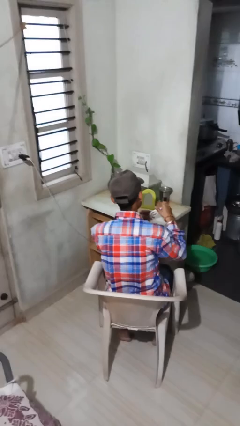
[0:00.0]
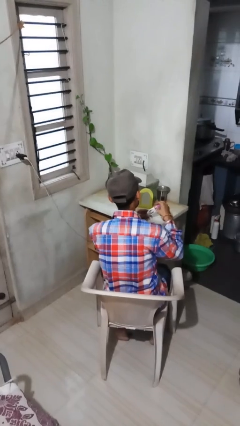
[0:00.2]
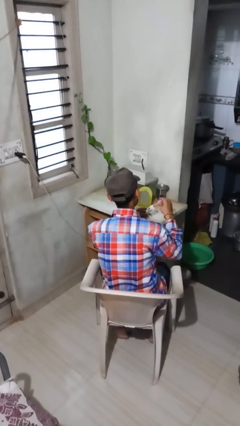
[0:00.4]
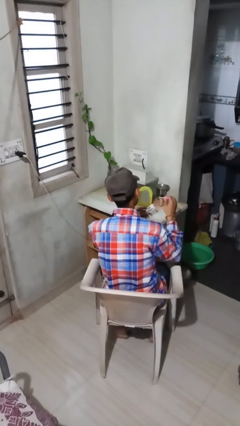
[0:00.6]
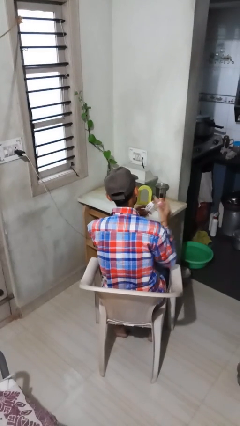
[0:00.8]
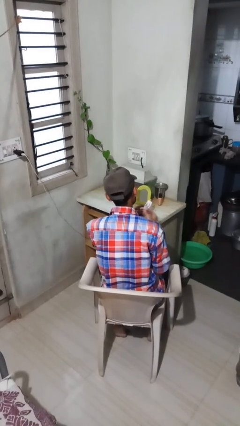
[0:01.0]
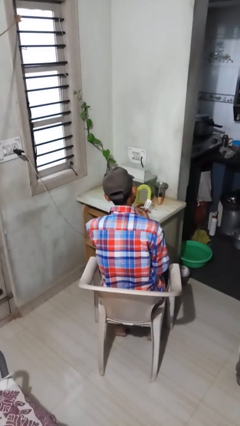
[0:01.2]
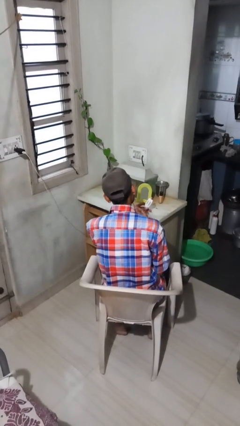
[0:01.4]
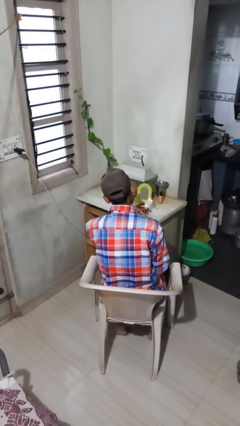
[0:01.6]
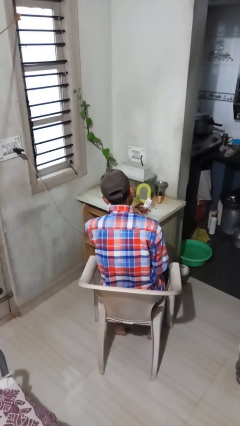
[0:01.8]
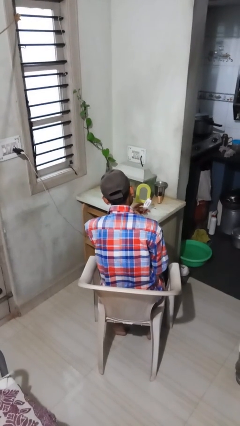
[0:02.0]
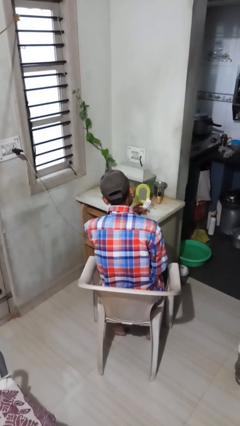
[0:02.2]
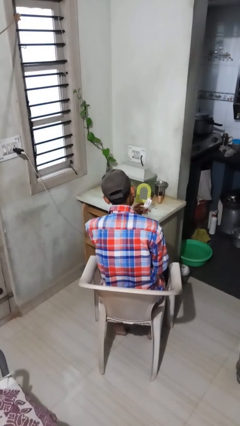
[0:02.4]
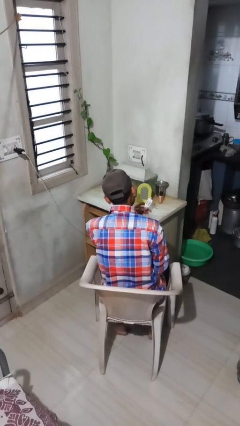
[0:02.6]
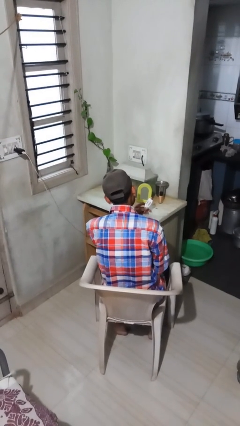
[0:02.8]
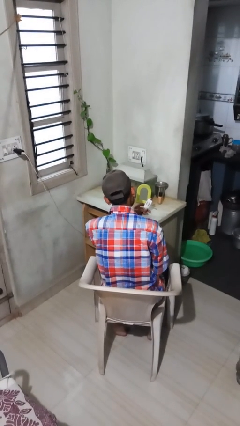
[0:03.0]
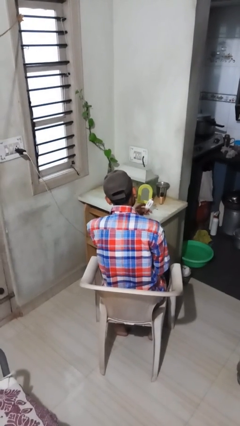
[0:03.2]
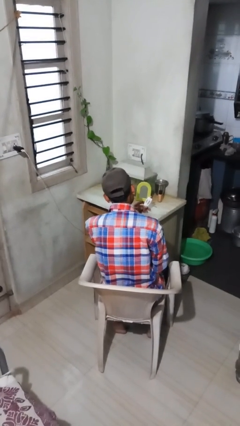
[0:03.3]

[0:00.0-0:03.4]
person applies lip makeup

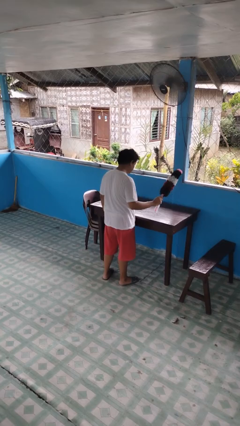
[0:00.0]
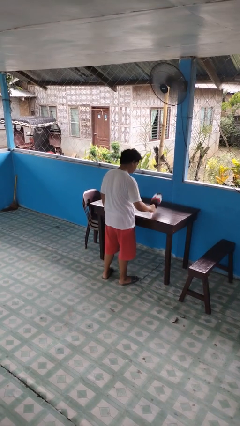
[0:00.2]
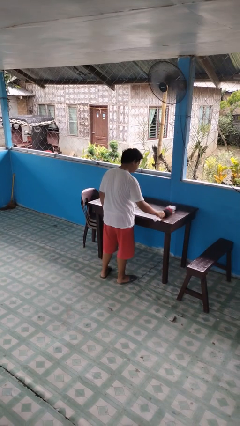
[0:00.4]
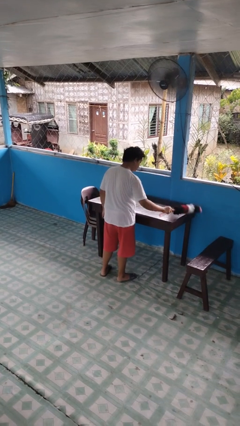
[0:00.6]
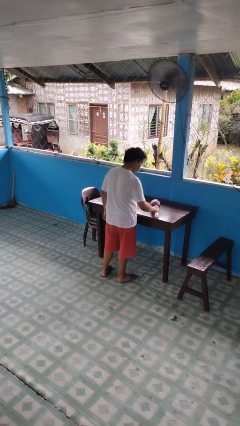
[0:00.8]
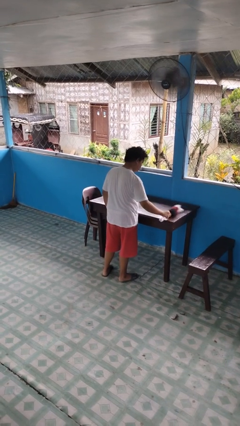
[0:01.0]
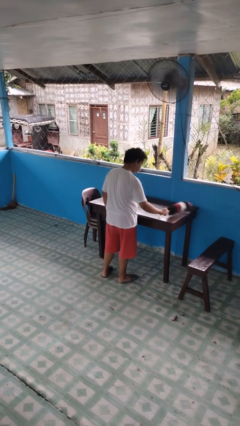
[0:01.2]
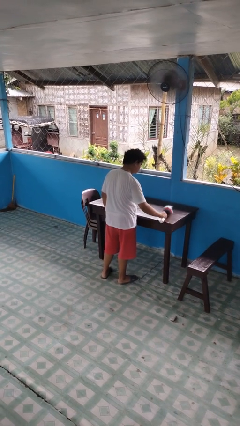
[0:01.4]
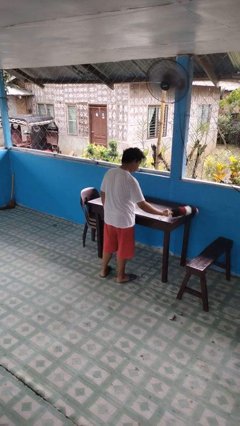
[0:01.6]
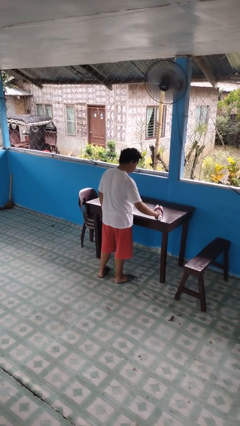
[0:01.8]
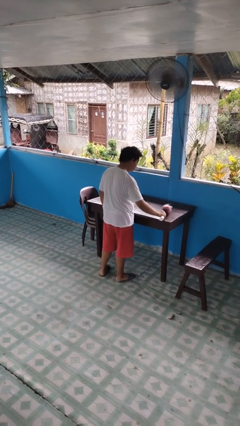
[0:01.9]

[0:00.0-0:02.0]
person dusts furniture

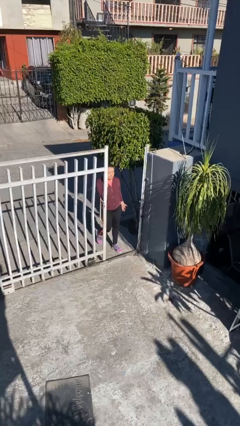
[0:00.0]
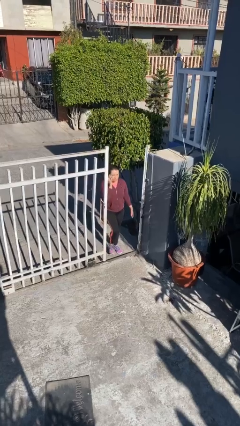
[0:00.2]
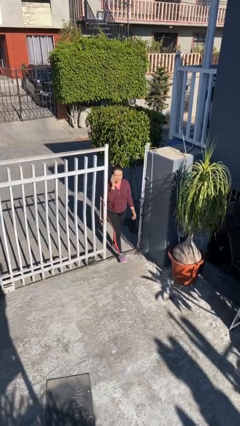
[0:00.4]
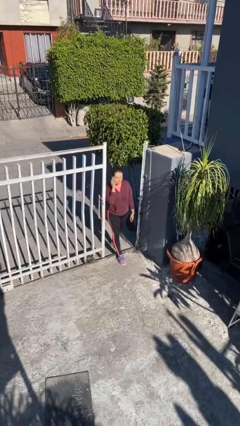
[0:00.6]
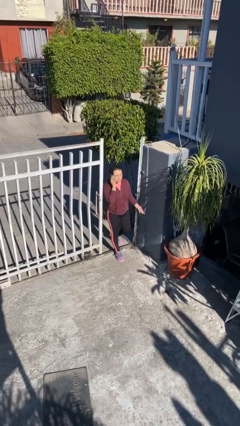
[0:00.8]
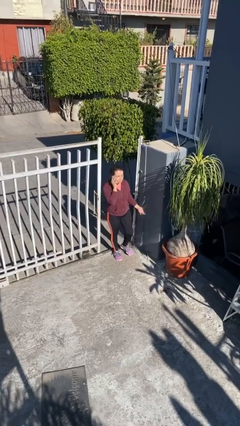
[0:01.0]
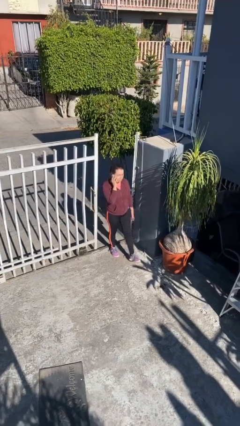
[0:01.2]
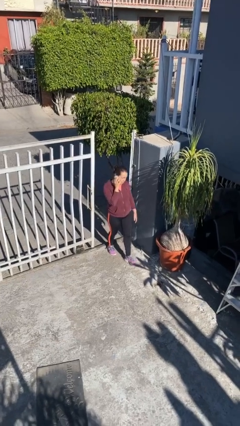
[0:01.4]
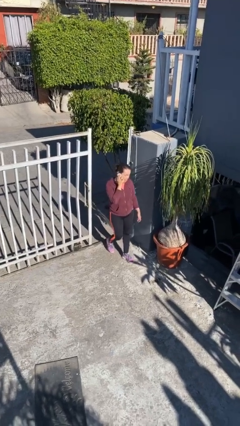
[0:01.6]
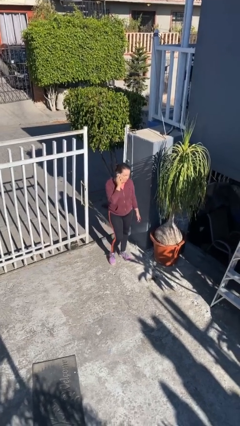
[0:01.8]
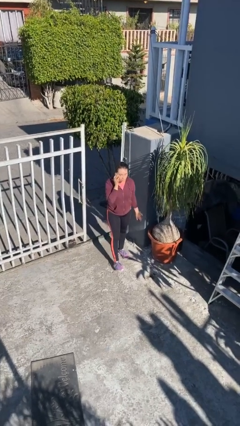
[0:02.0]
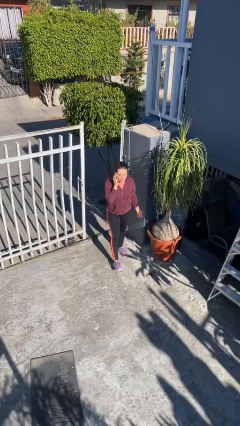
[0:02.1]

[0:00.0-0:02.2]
person enters scene through structure

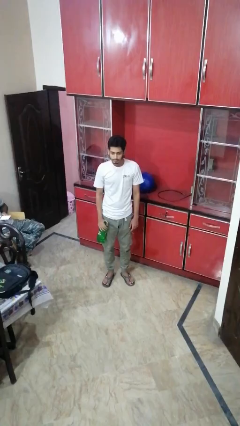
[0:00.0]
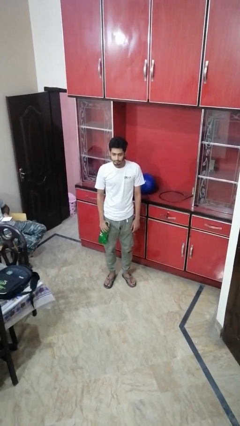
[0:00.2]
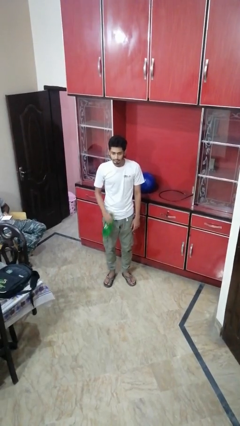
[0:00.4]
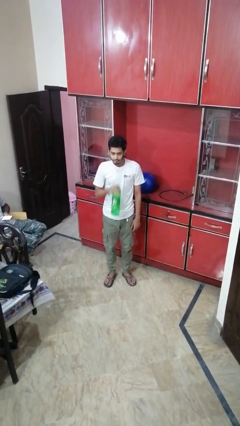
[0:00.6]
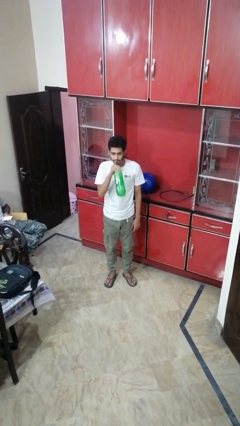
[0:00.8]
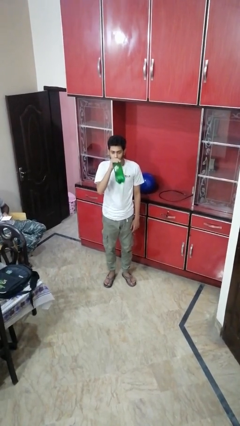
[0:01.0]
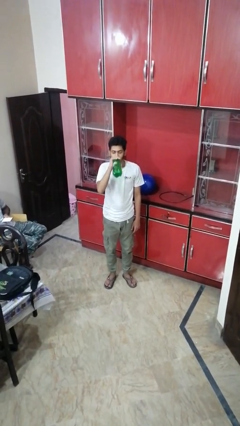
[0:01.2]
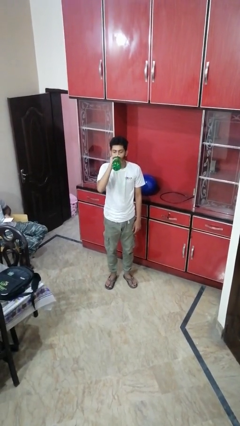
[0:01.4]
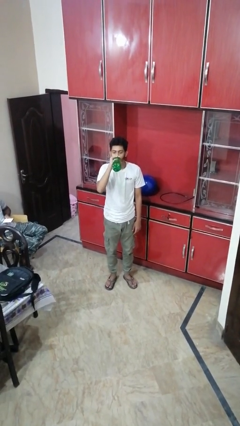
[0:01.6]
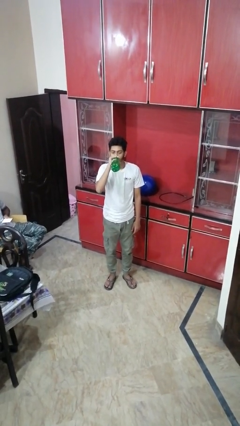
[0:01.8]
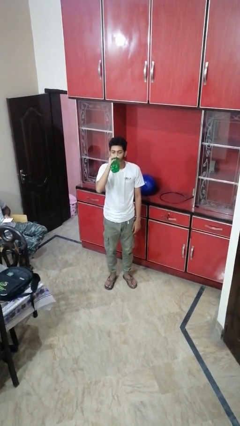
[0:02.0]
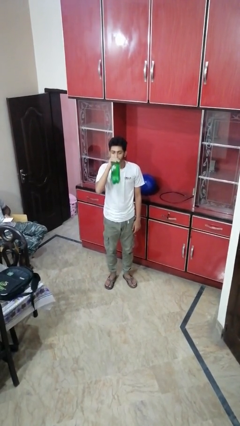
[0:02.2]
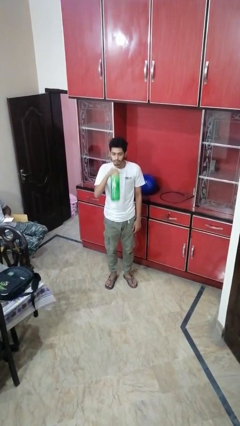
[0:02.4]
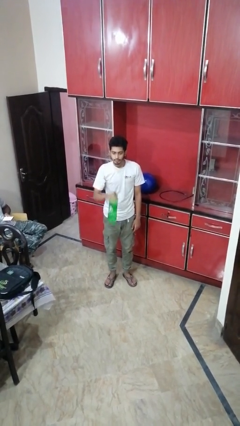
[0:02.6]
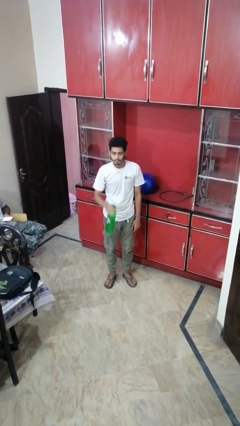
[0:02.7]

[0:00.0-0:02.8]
person drinks from bottle

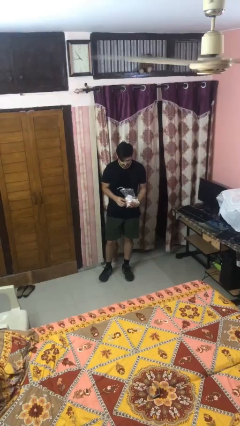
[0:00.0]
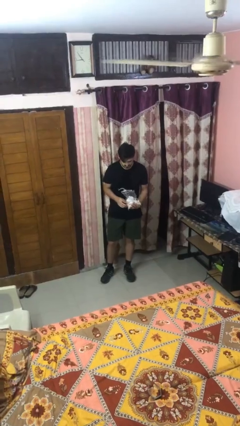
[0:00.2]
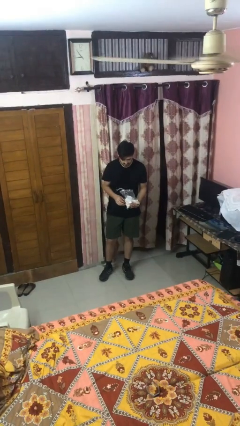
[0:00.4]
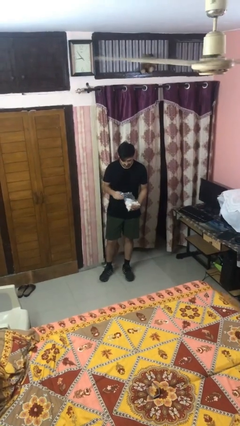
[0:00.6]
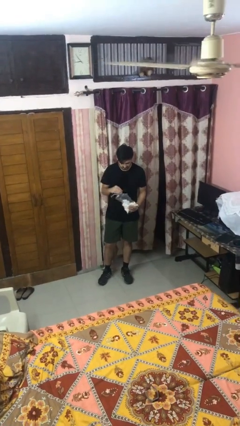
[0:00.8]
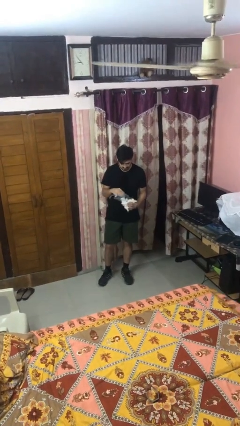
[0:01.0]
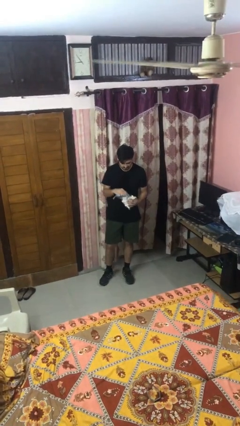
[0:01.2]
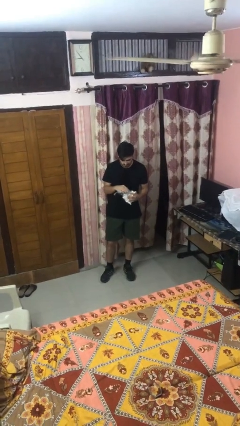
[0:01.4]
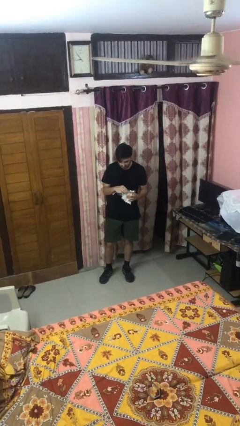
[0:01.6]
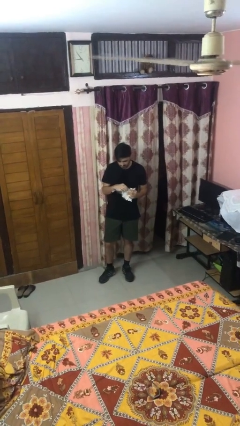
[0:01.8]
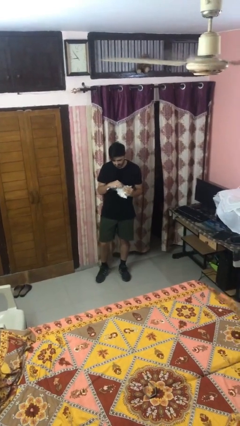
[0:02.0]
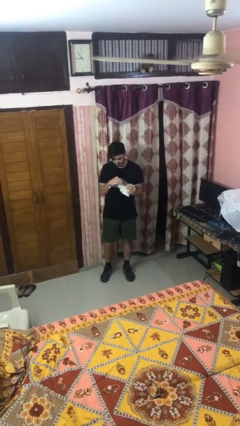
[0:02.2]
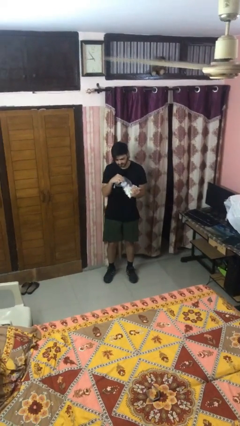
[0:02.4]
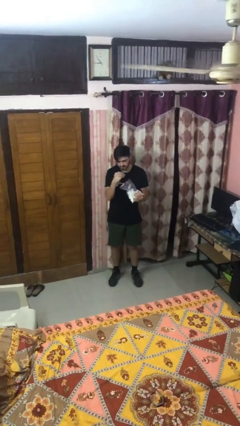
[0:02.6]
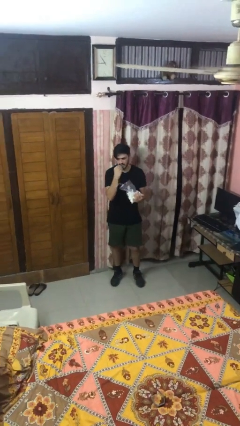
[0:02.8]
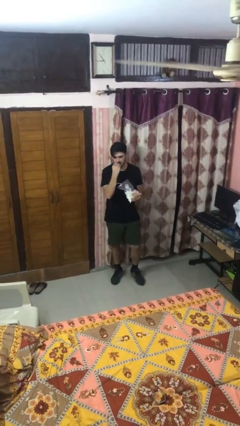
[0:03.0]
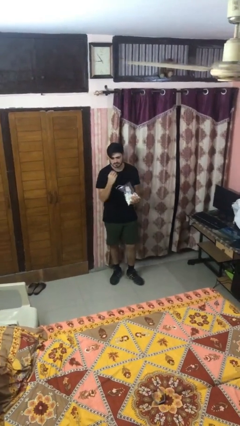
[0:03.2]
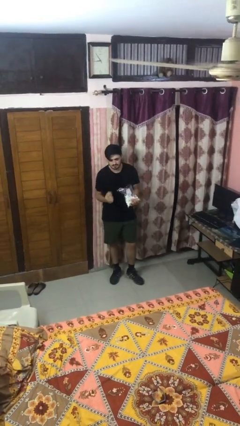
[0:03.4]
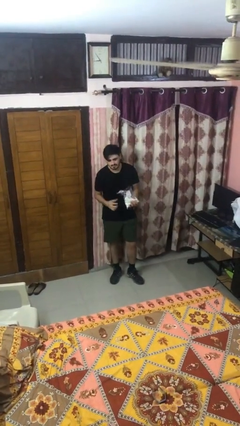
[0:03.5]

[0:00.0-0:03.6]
person eats snack from bag

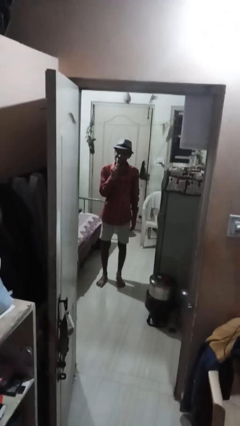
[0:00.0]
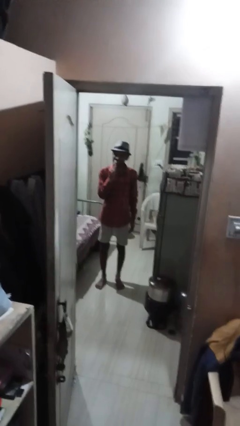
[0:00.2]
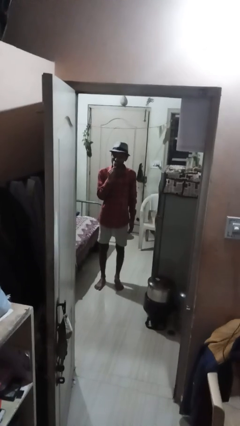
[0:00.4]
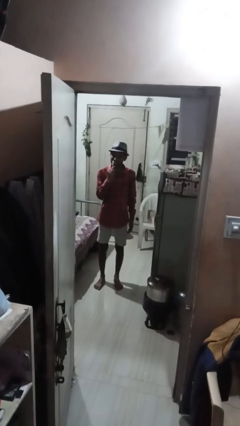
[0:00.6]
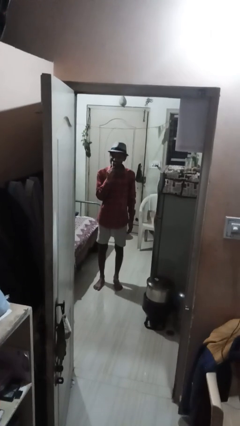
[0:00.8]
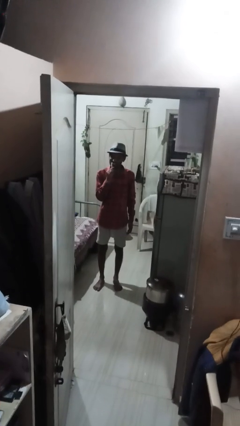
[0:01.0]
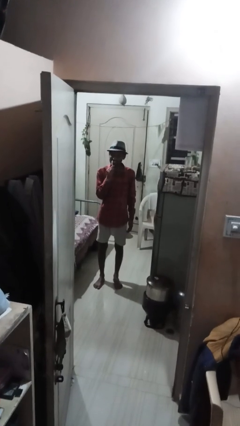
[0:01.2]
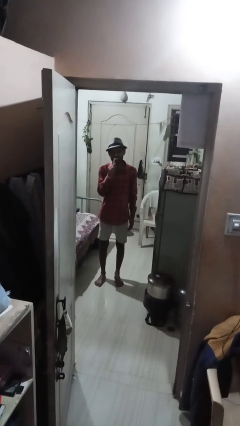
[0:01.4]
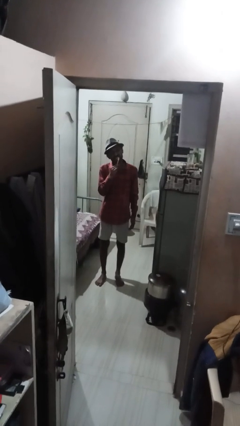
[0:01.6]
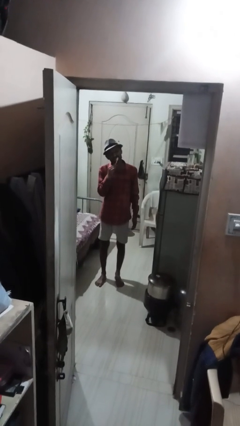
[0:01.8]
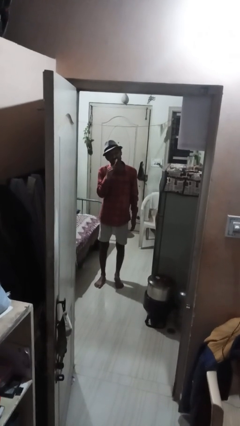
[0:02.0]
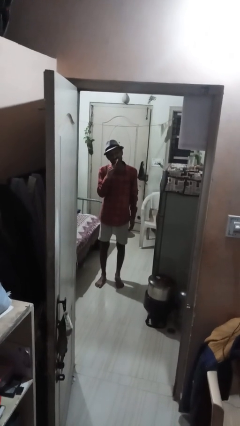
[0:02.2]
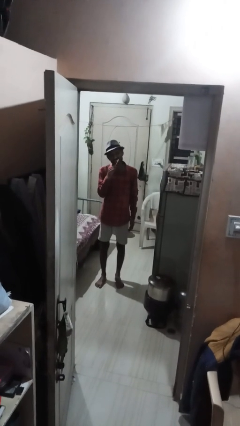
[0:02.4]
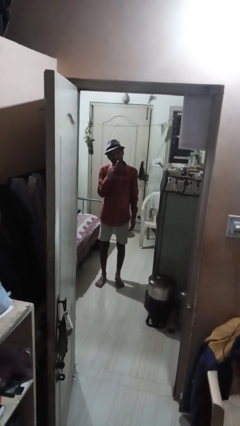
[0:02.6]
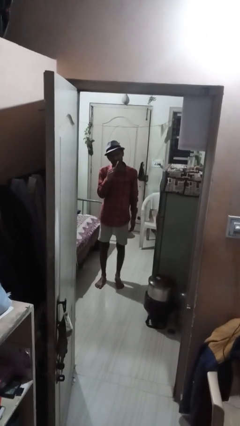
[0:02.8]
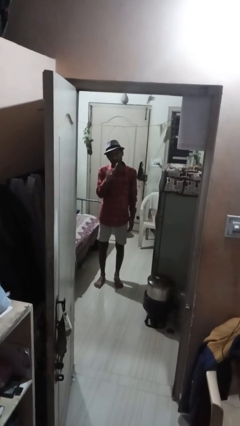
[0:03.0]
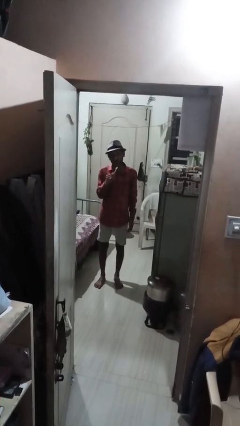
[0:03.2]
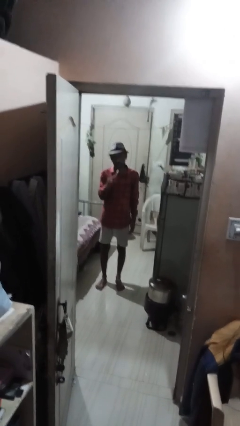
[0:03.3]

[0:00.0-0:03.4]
person brushes teeth
